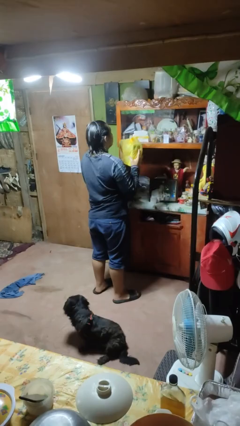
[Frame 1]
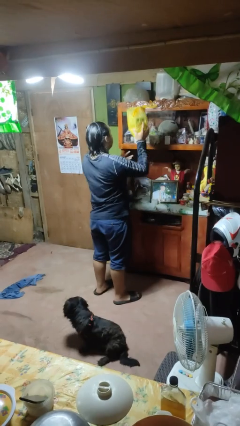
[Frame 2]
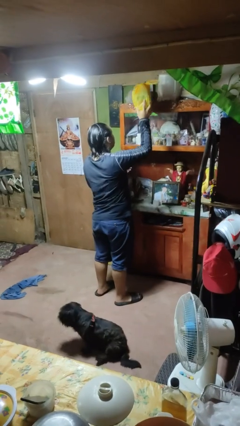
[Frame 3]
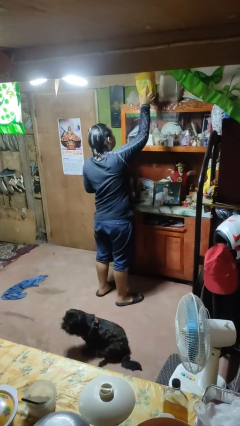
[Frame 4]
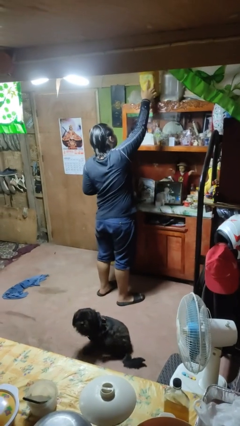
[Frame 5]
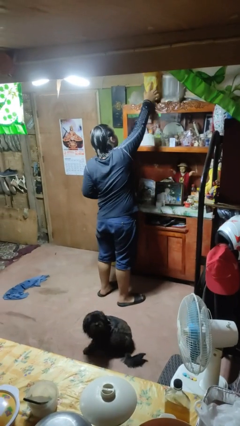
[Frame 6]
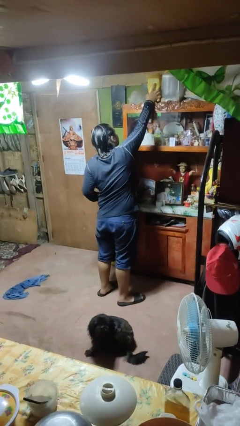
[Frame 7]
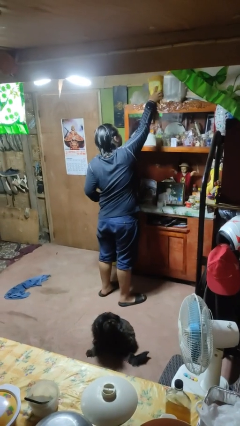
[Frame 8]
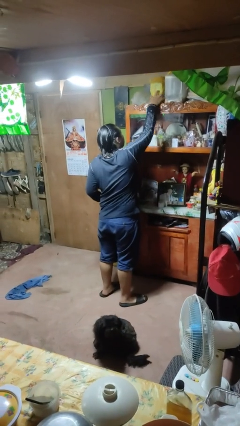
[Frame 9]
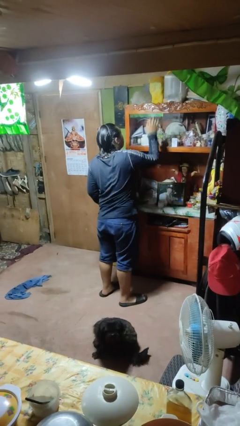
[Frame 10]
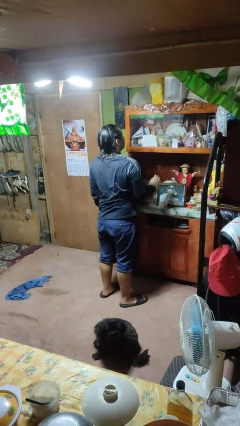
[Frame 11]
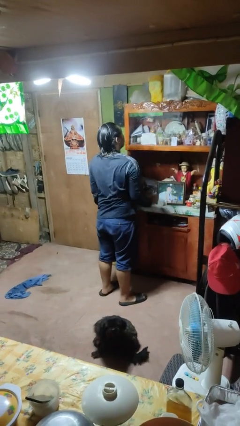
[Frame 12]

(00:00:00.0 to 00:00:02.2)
person puts down object on shelf

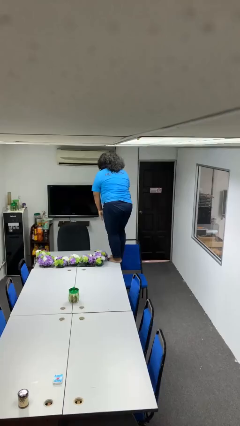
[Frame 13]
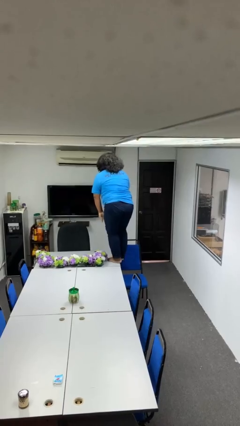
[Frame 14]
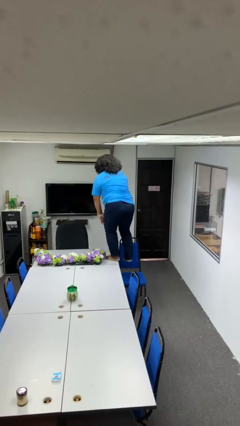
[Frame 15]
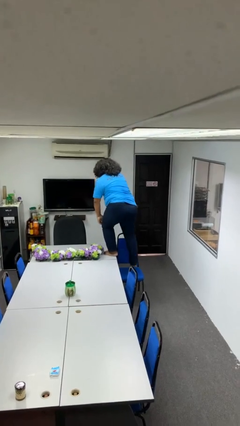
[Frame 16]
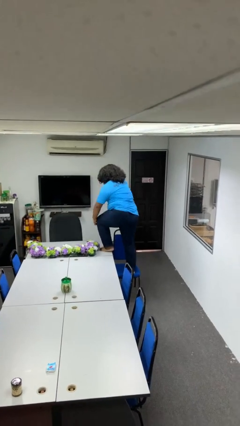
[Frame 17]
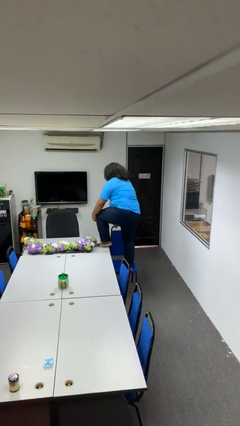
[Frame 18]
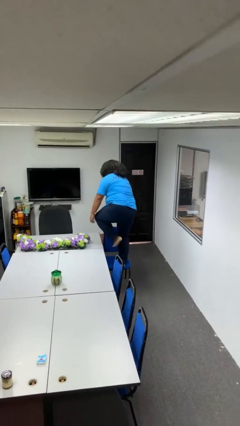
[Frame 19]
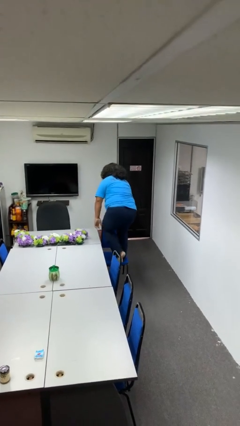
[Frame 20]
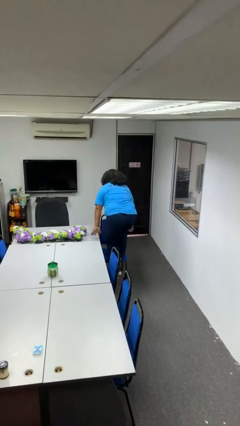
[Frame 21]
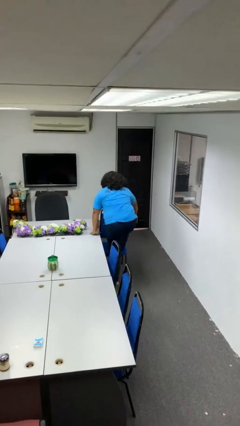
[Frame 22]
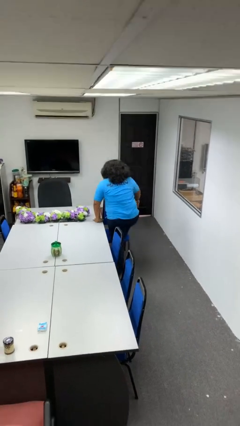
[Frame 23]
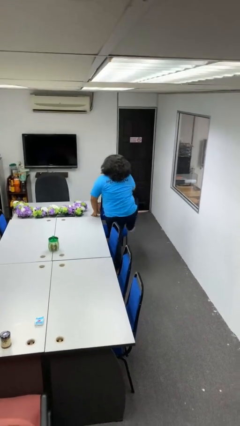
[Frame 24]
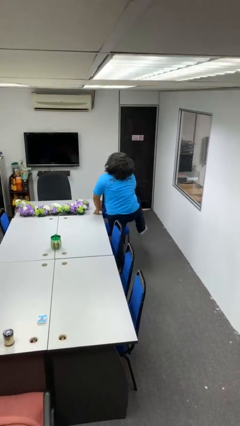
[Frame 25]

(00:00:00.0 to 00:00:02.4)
person climbs off table

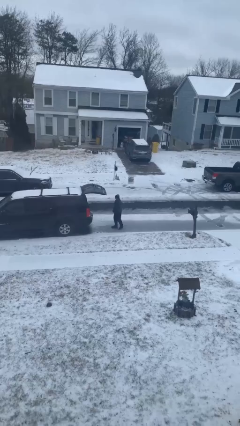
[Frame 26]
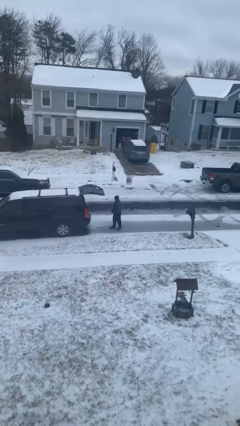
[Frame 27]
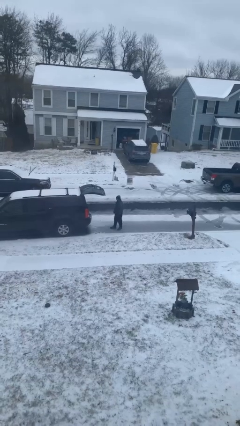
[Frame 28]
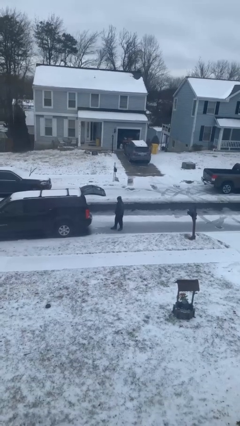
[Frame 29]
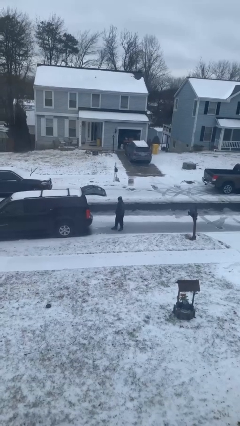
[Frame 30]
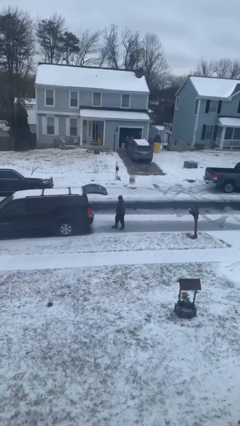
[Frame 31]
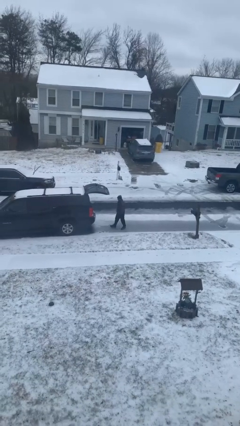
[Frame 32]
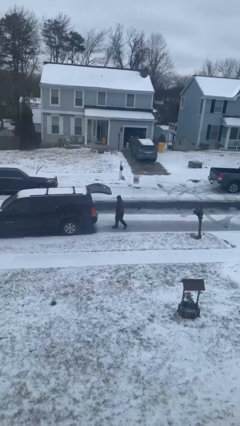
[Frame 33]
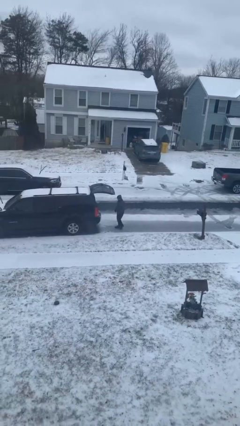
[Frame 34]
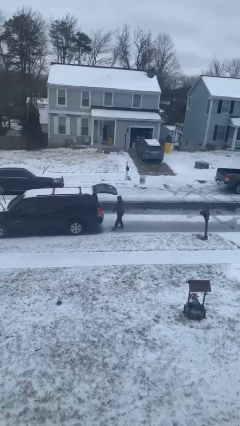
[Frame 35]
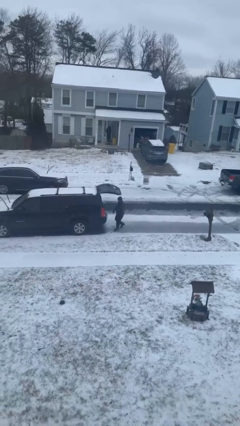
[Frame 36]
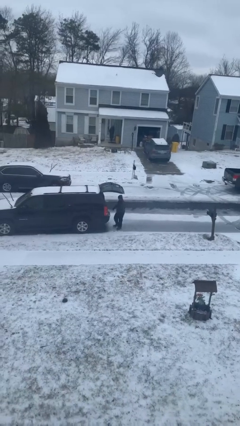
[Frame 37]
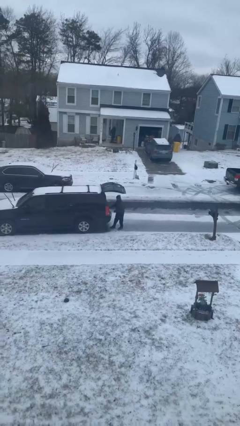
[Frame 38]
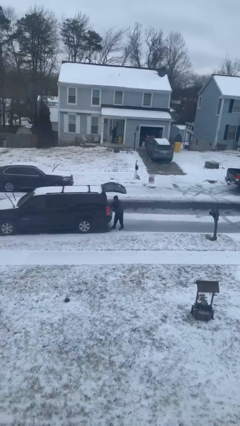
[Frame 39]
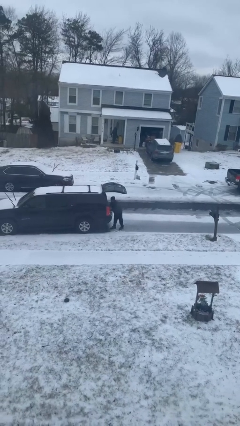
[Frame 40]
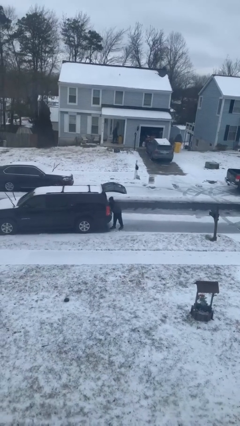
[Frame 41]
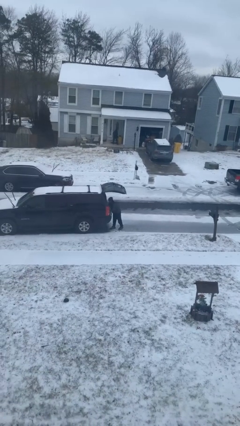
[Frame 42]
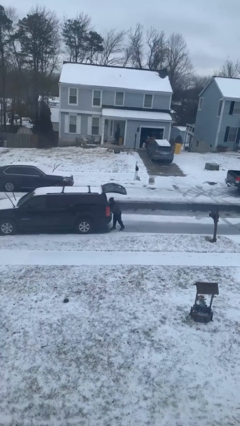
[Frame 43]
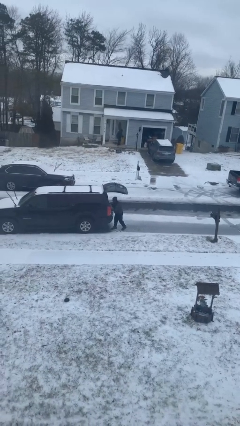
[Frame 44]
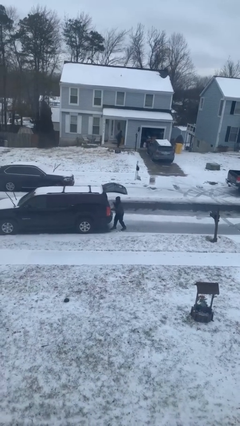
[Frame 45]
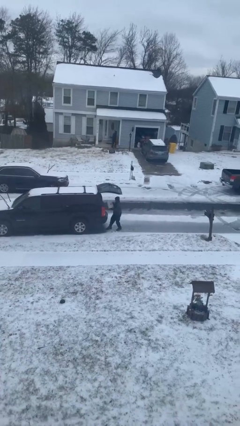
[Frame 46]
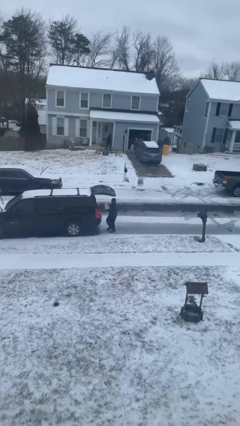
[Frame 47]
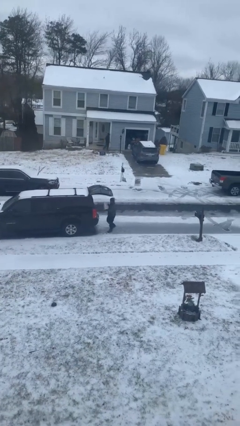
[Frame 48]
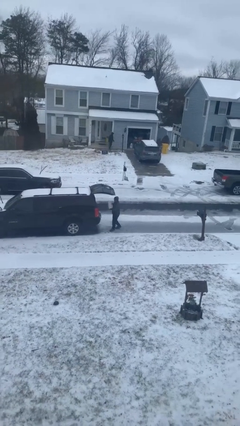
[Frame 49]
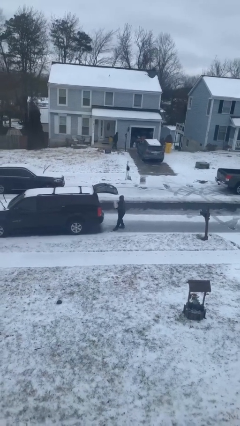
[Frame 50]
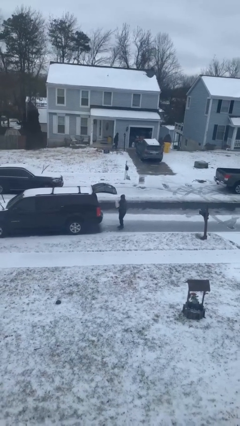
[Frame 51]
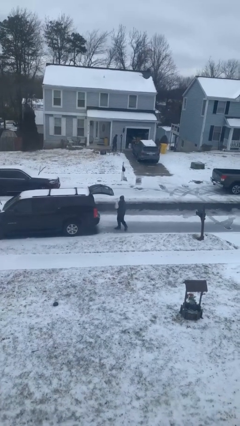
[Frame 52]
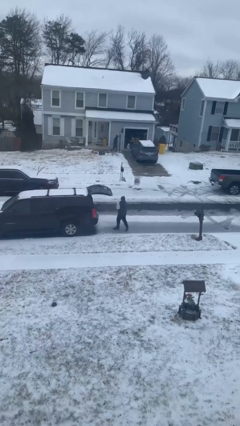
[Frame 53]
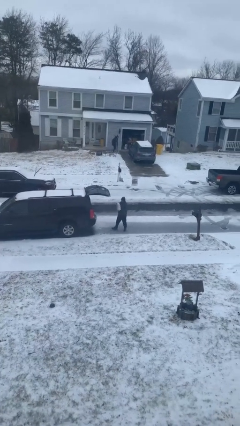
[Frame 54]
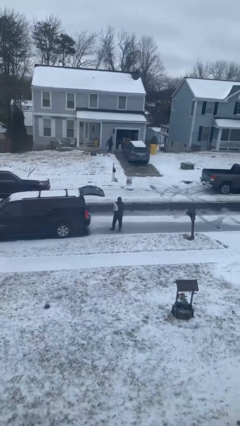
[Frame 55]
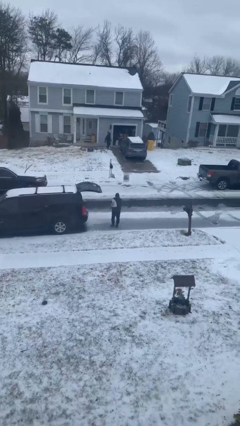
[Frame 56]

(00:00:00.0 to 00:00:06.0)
person unloads car

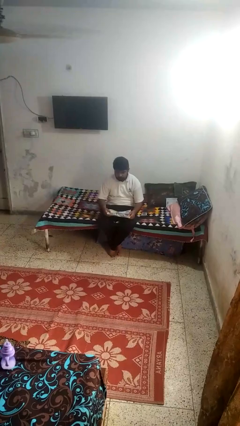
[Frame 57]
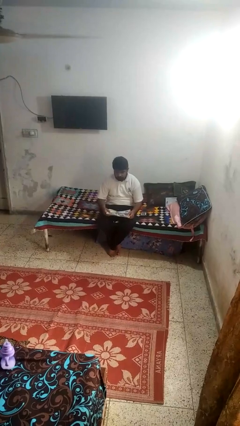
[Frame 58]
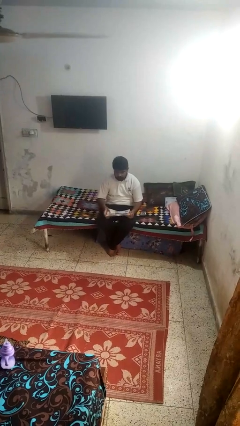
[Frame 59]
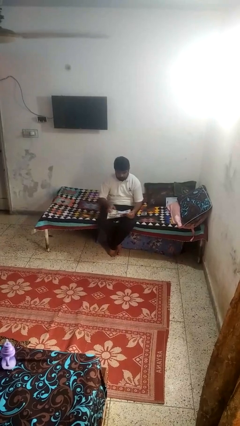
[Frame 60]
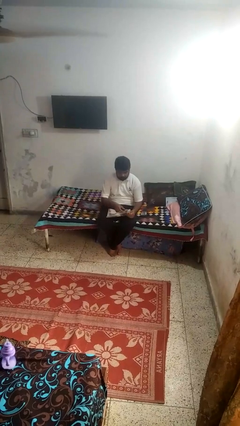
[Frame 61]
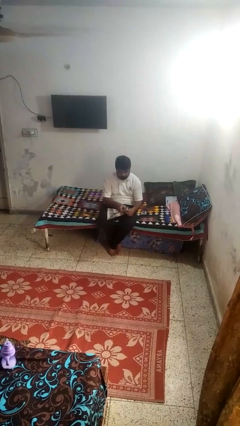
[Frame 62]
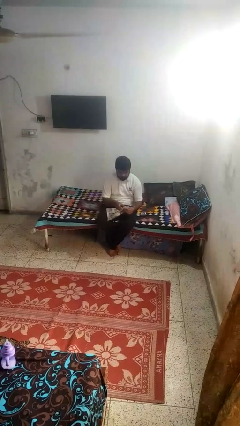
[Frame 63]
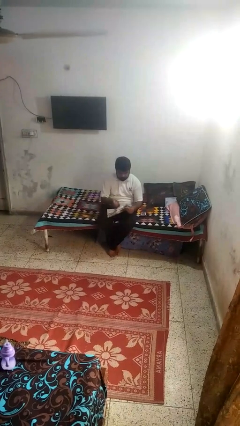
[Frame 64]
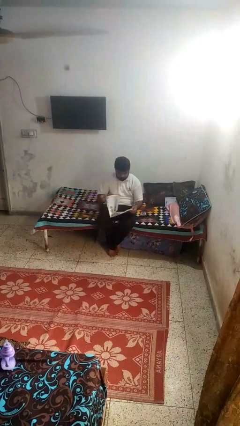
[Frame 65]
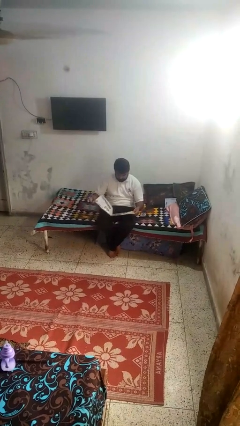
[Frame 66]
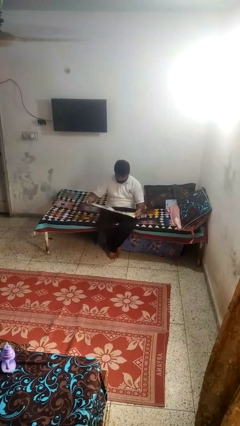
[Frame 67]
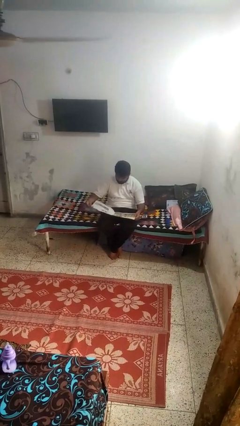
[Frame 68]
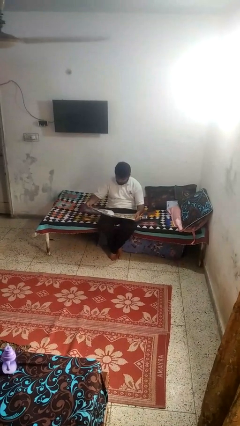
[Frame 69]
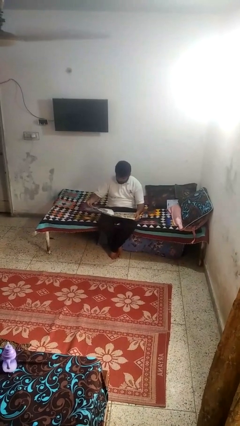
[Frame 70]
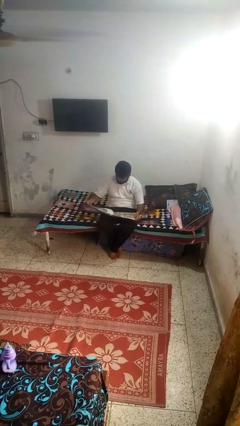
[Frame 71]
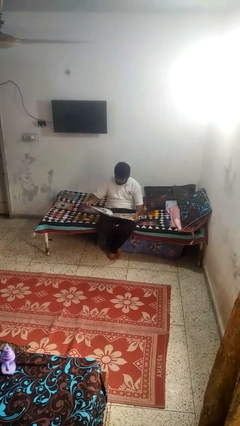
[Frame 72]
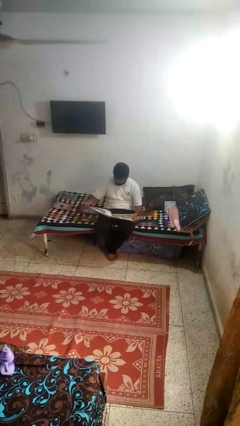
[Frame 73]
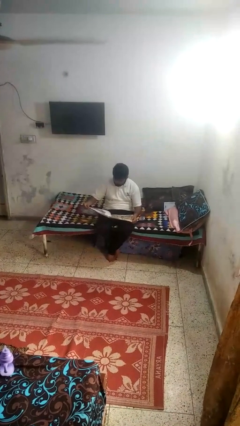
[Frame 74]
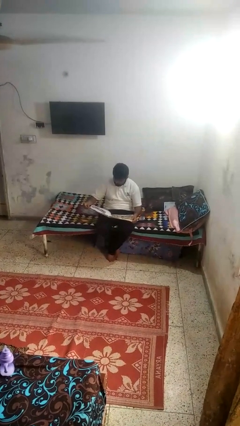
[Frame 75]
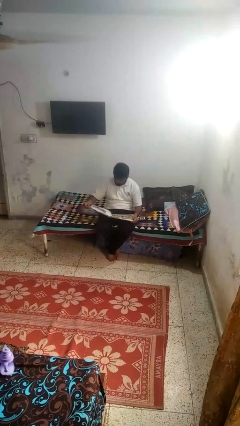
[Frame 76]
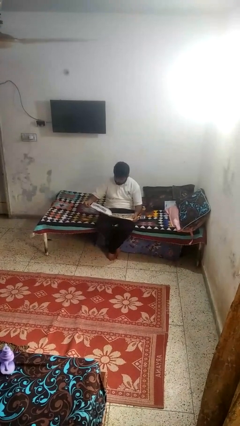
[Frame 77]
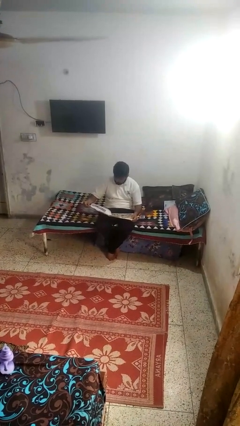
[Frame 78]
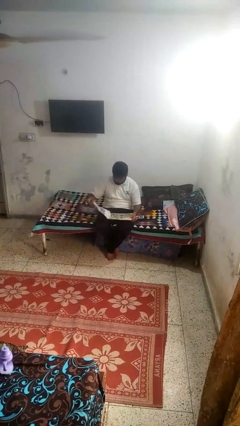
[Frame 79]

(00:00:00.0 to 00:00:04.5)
person reads magazine

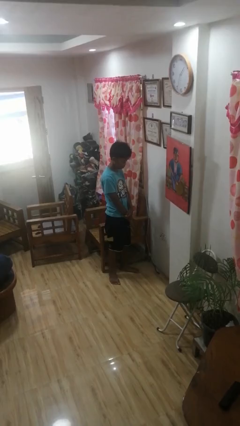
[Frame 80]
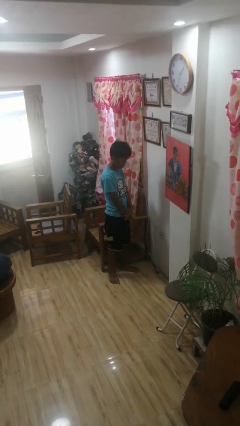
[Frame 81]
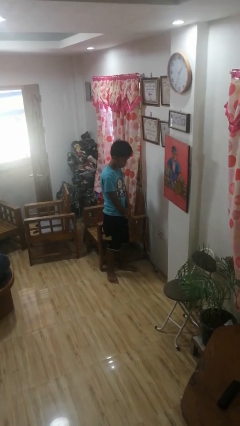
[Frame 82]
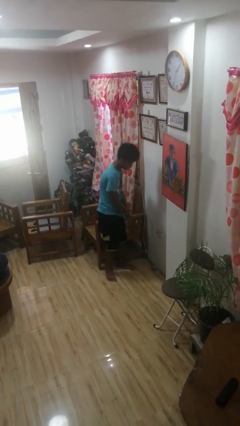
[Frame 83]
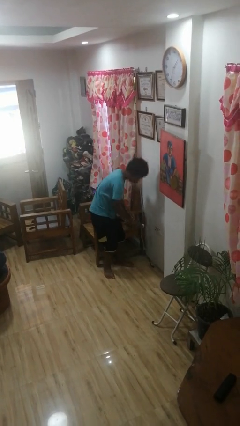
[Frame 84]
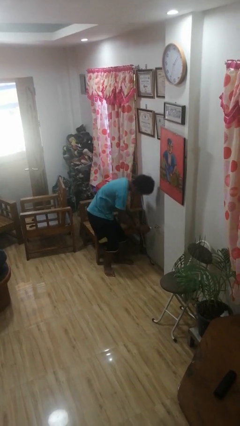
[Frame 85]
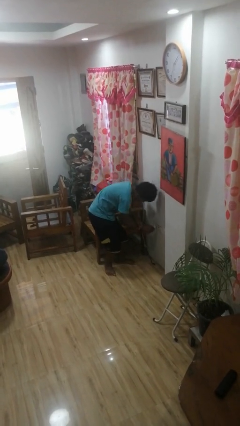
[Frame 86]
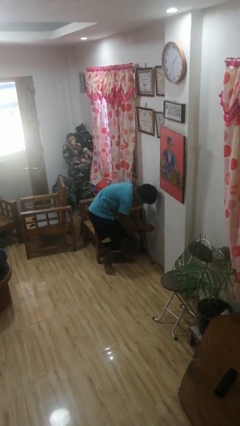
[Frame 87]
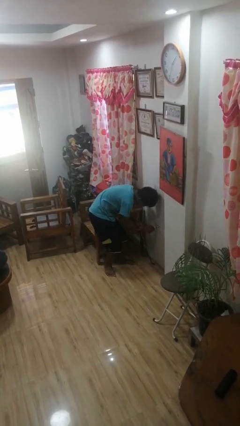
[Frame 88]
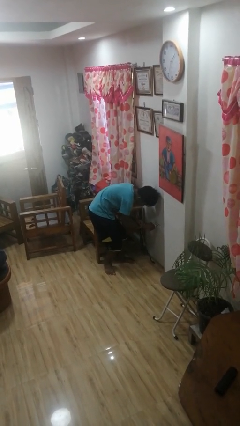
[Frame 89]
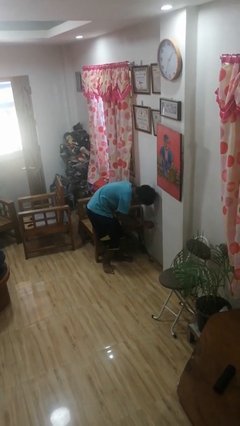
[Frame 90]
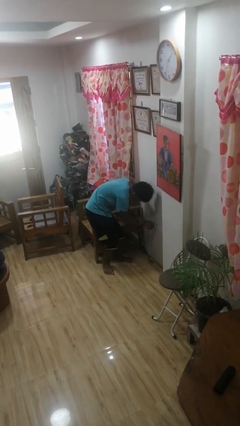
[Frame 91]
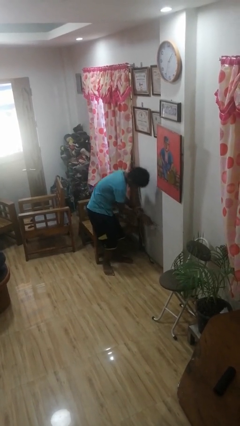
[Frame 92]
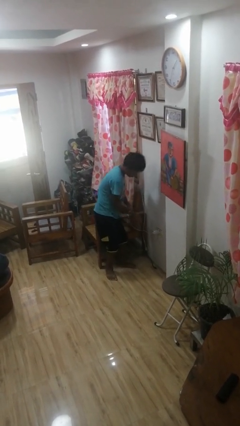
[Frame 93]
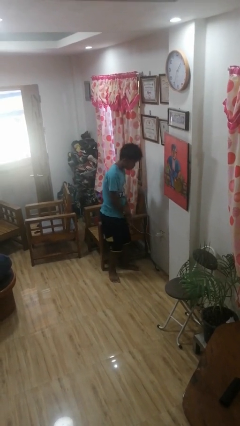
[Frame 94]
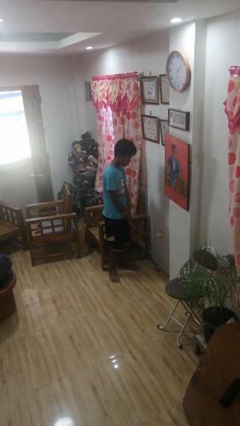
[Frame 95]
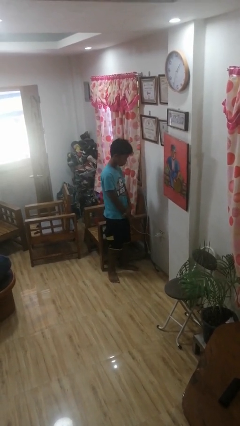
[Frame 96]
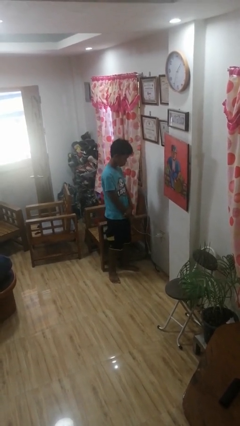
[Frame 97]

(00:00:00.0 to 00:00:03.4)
person plugs into electrical socket
